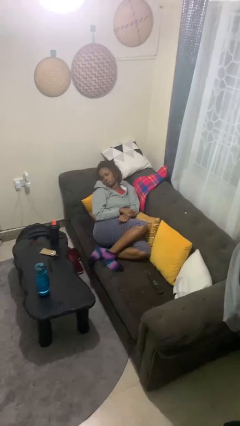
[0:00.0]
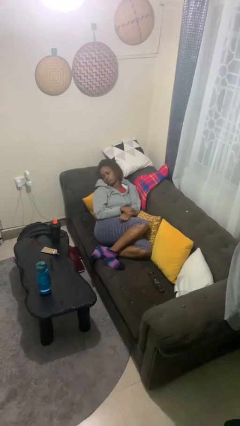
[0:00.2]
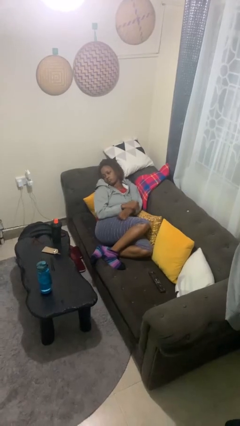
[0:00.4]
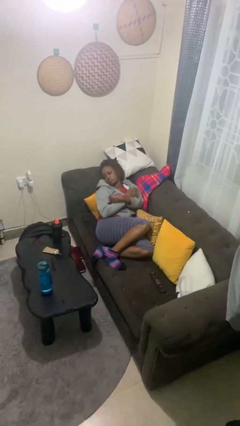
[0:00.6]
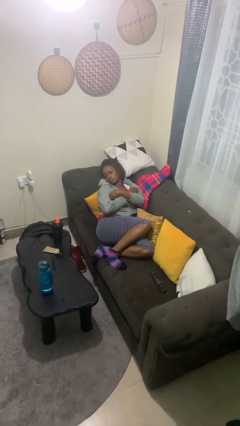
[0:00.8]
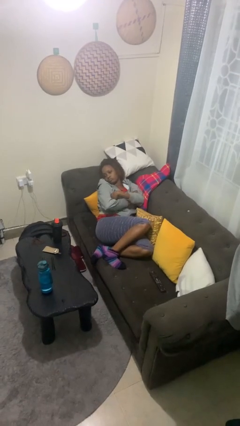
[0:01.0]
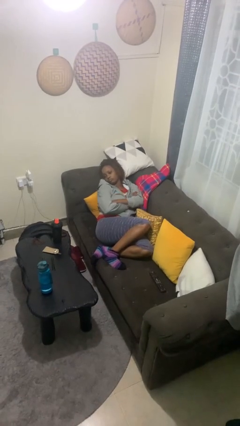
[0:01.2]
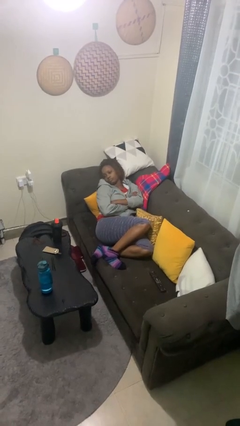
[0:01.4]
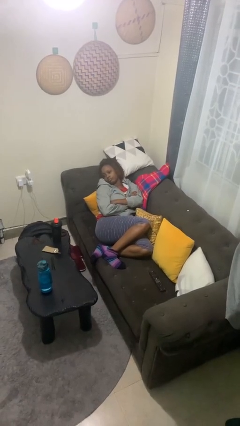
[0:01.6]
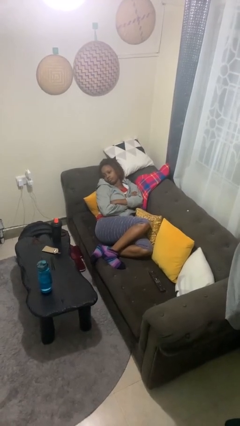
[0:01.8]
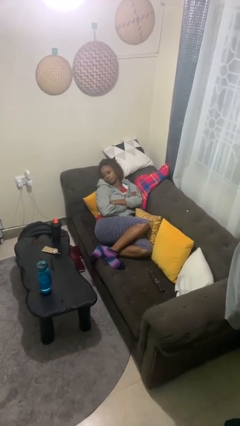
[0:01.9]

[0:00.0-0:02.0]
person crosses arms

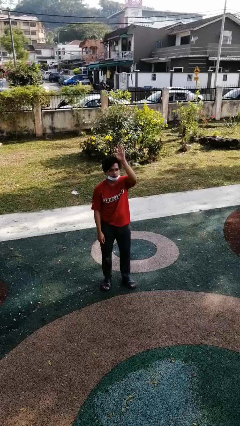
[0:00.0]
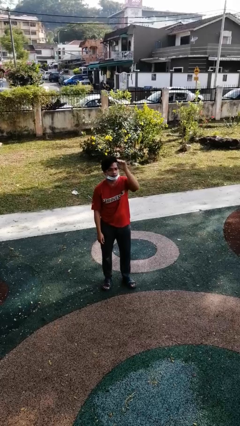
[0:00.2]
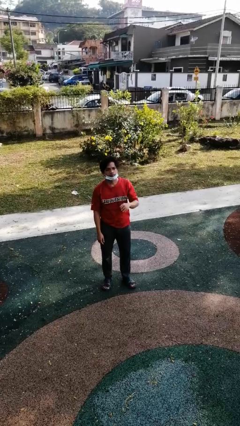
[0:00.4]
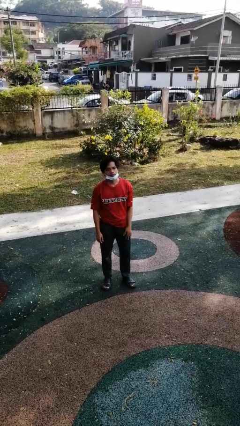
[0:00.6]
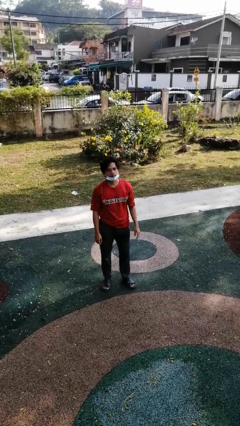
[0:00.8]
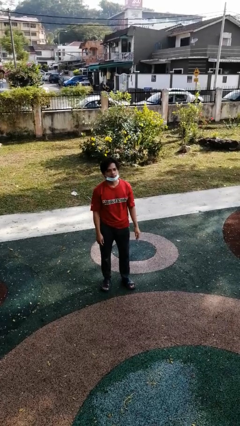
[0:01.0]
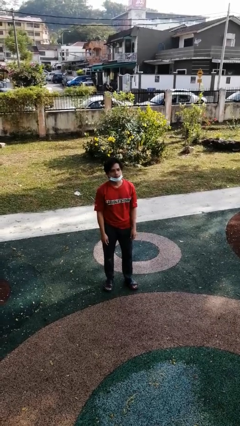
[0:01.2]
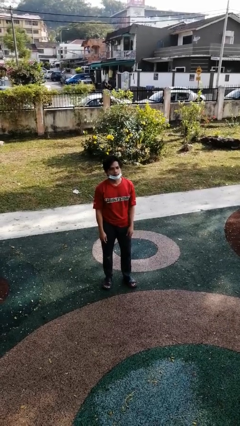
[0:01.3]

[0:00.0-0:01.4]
person gestures lower hand

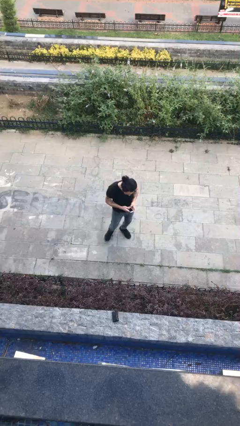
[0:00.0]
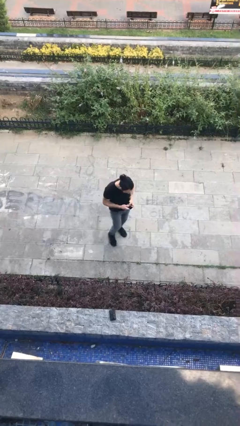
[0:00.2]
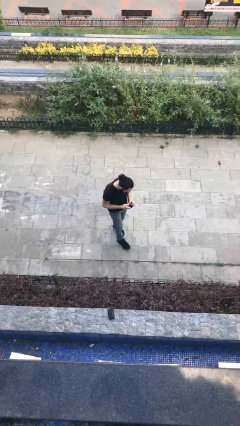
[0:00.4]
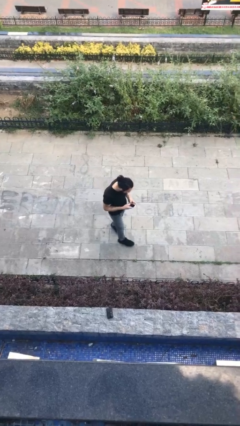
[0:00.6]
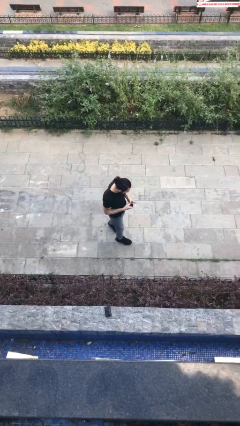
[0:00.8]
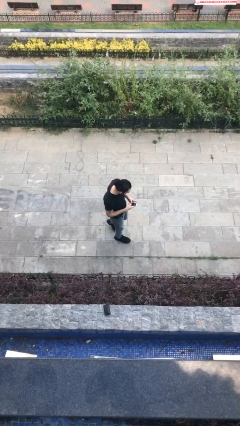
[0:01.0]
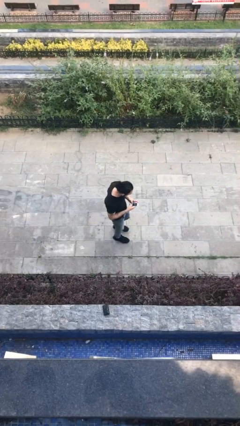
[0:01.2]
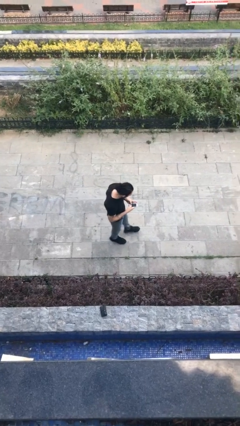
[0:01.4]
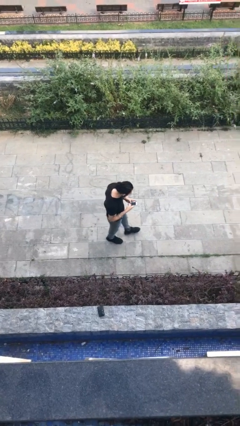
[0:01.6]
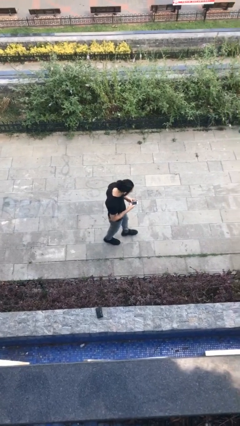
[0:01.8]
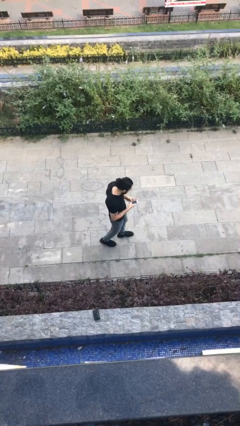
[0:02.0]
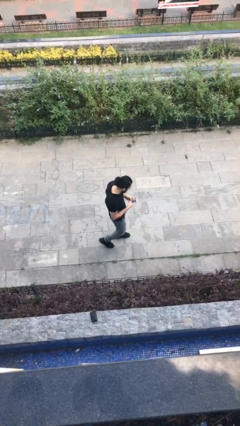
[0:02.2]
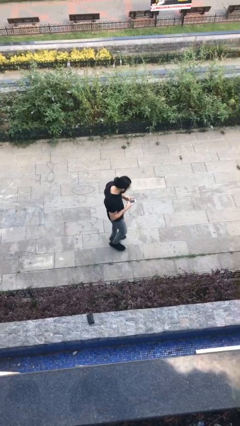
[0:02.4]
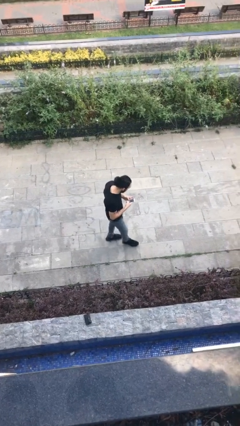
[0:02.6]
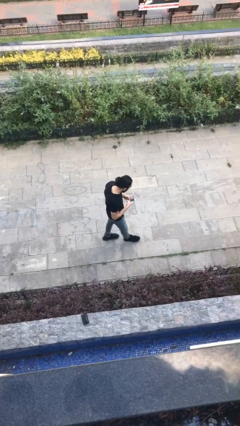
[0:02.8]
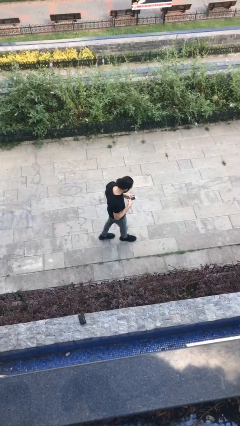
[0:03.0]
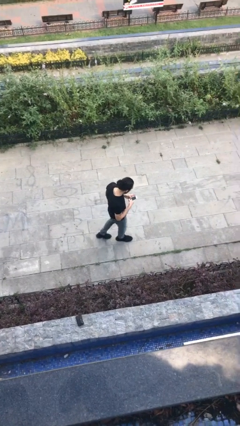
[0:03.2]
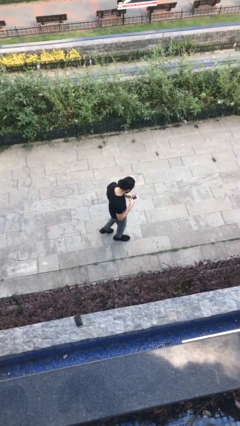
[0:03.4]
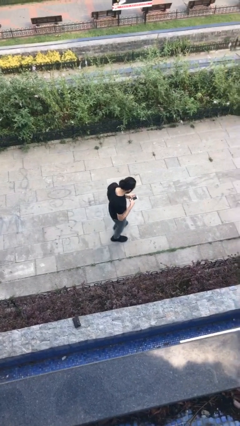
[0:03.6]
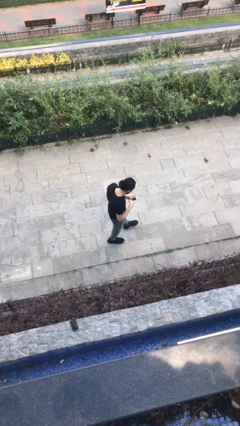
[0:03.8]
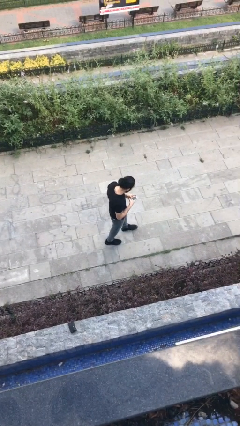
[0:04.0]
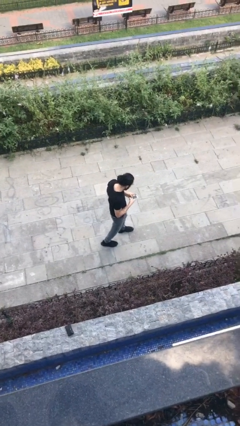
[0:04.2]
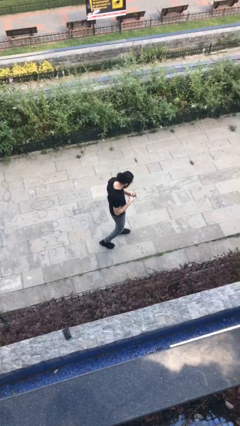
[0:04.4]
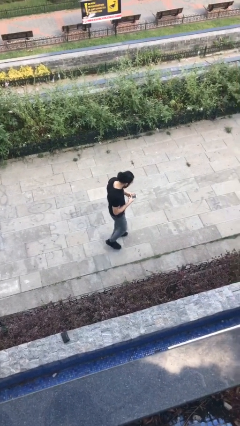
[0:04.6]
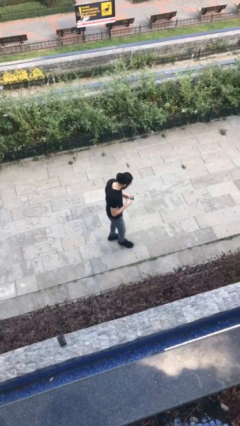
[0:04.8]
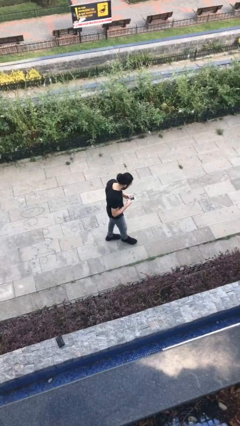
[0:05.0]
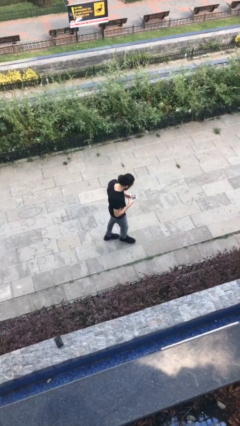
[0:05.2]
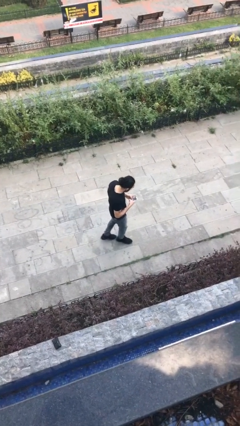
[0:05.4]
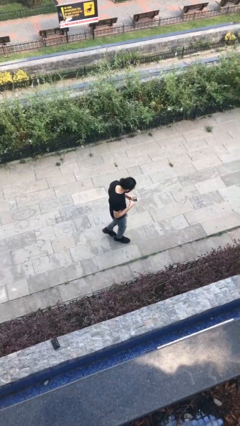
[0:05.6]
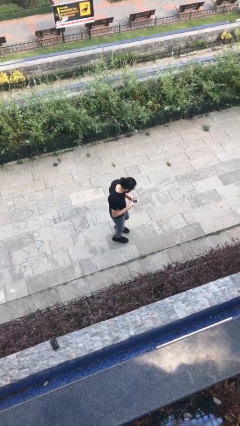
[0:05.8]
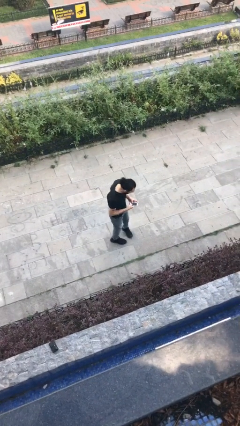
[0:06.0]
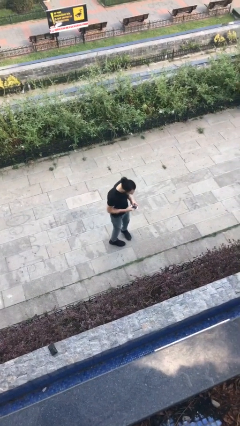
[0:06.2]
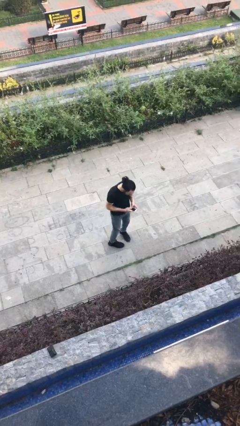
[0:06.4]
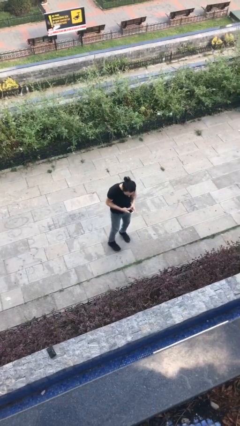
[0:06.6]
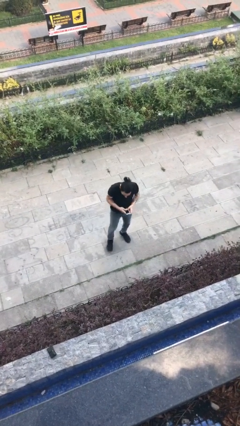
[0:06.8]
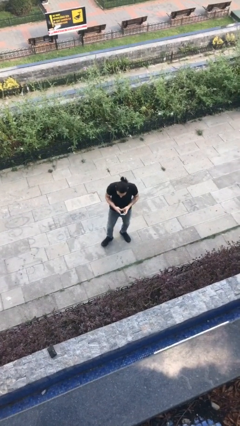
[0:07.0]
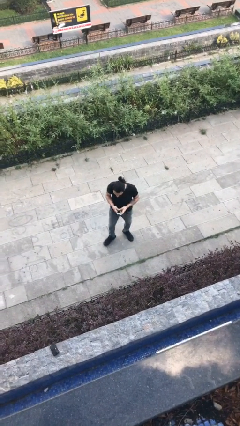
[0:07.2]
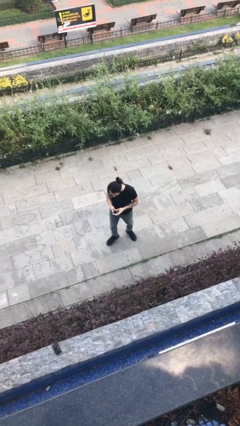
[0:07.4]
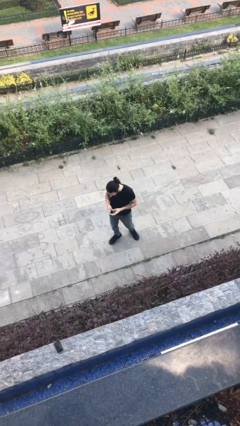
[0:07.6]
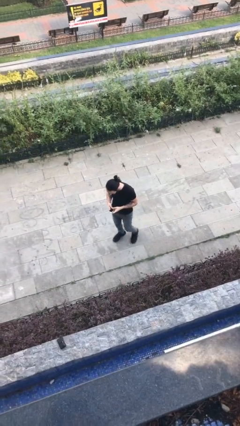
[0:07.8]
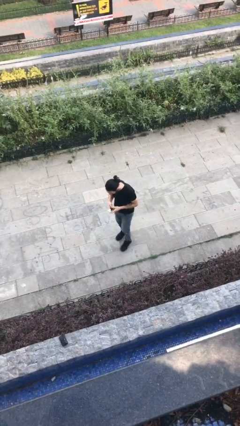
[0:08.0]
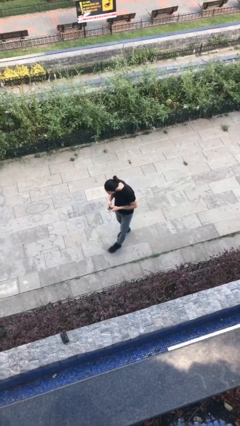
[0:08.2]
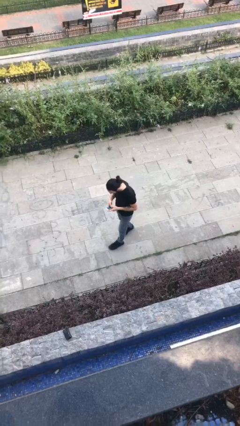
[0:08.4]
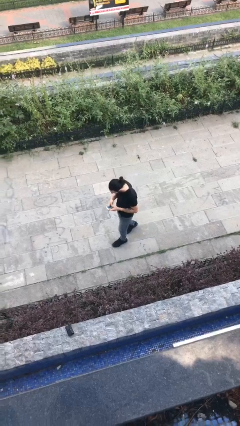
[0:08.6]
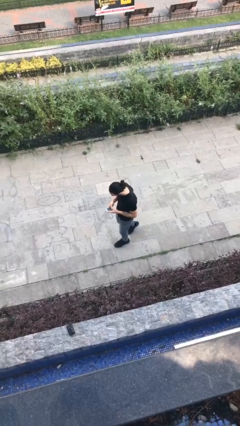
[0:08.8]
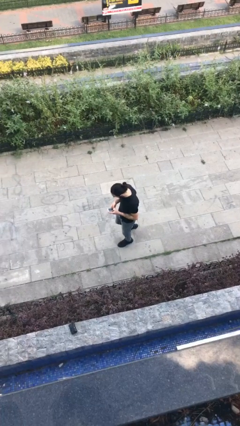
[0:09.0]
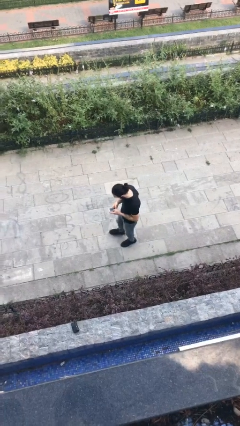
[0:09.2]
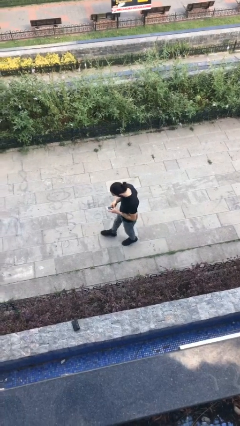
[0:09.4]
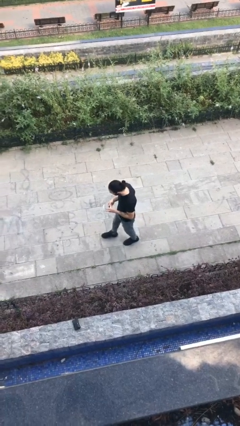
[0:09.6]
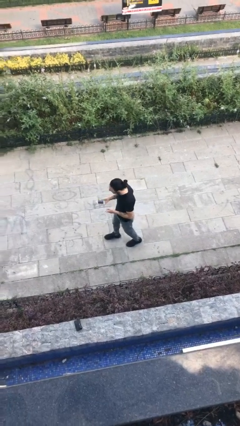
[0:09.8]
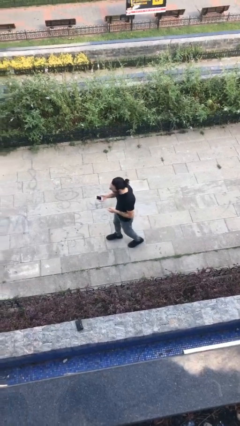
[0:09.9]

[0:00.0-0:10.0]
person texts on phone

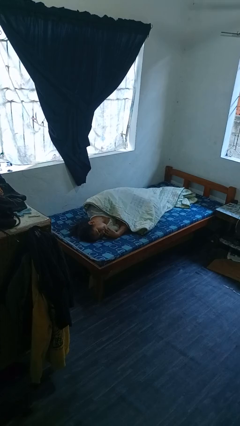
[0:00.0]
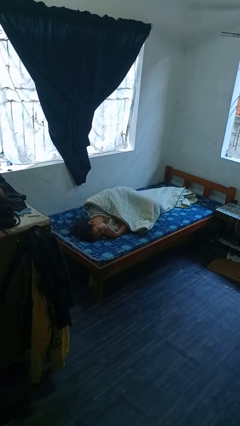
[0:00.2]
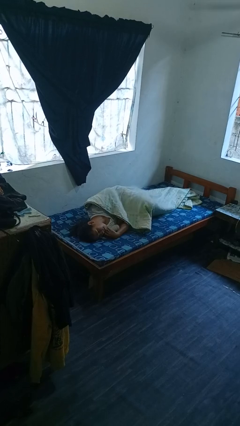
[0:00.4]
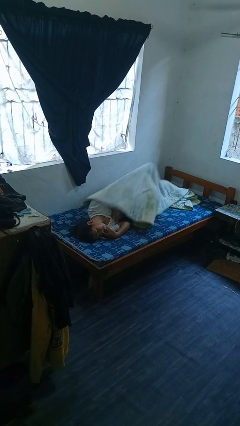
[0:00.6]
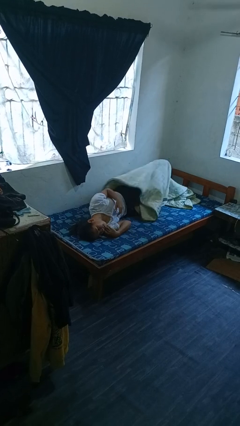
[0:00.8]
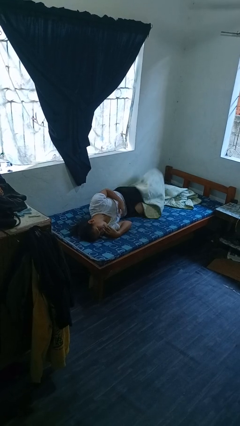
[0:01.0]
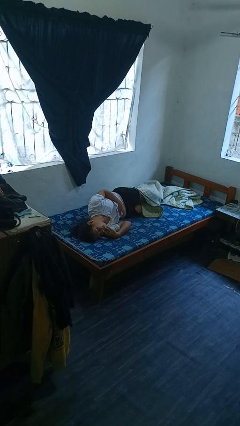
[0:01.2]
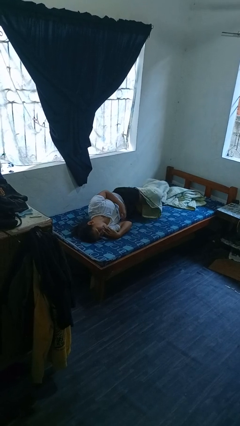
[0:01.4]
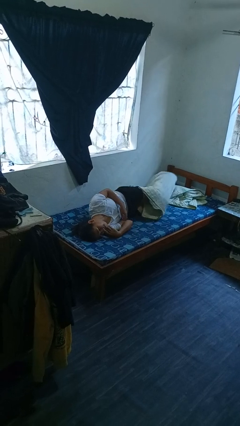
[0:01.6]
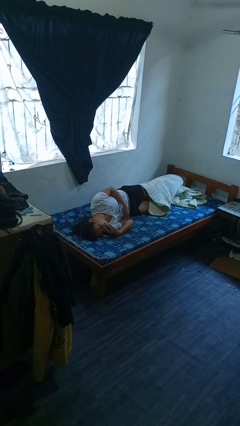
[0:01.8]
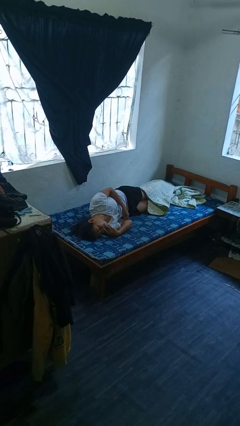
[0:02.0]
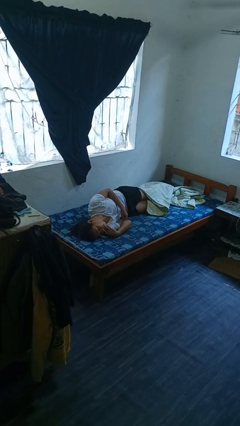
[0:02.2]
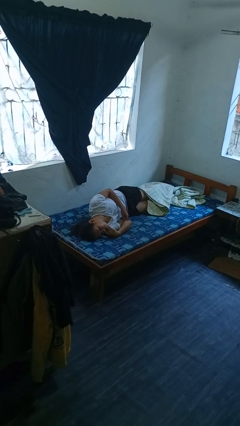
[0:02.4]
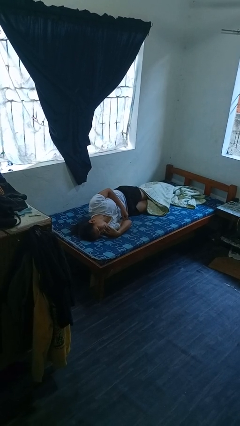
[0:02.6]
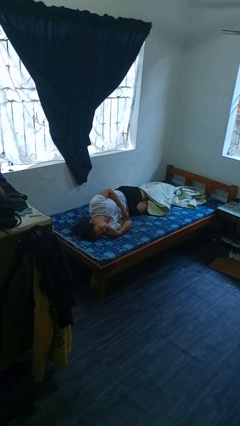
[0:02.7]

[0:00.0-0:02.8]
person uncovers with bedsheets

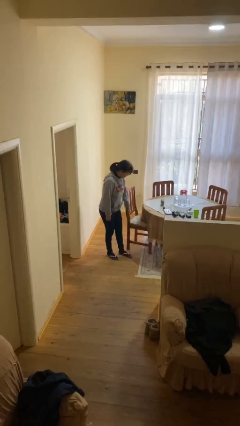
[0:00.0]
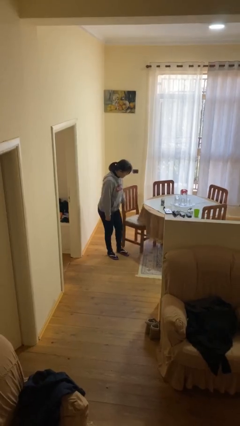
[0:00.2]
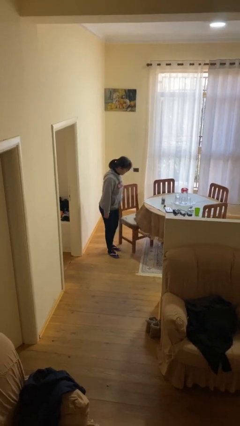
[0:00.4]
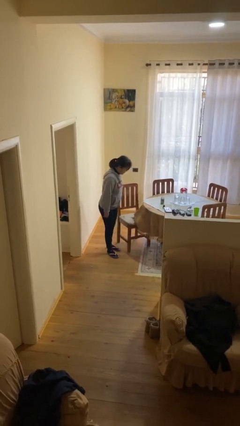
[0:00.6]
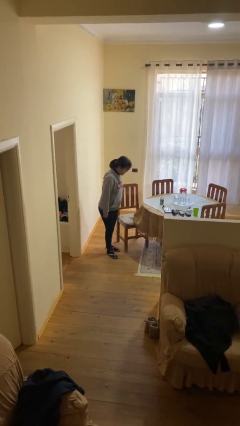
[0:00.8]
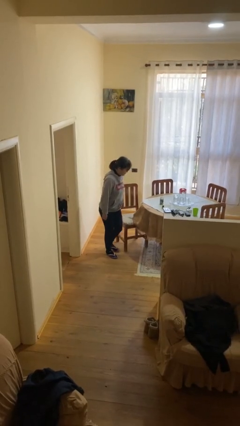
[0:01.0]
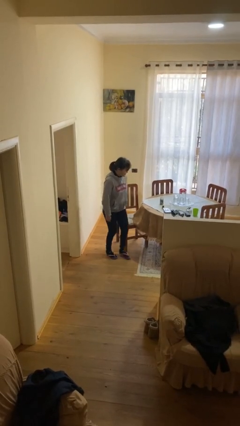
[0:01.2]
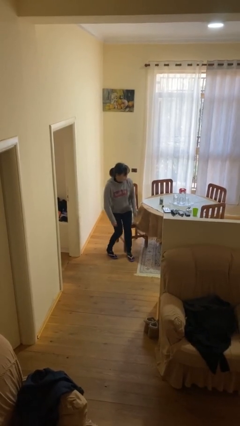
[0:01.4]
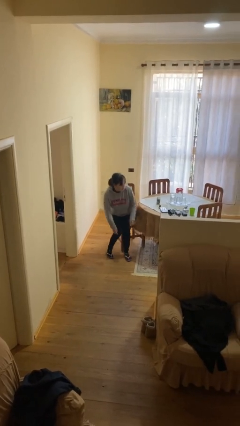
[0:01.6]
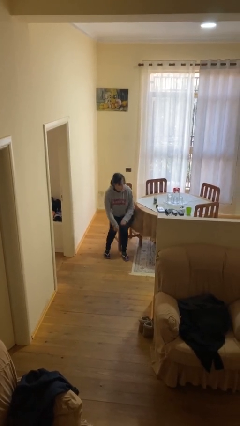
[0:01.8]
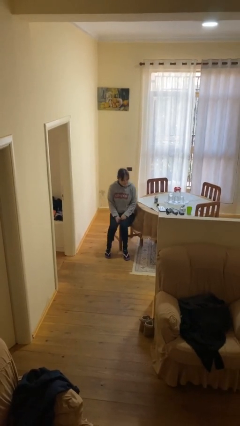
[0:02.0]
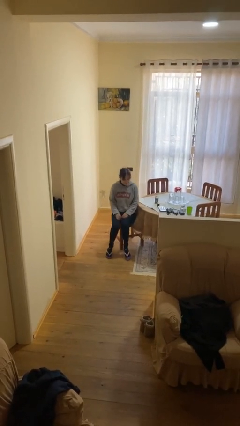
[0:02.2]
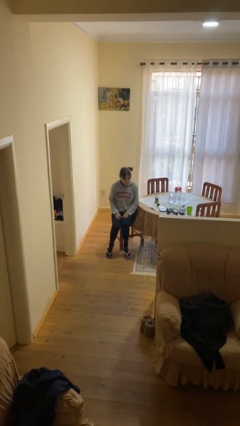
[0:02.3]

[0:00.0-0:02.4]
person sits down
